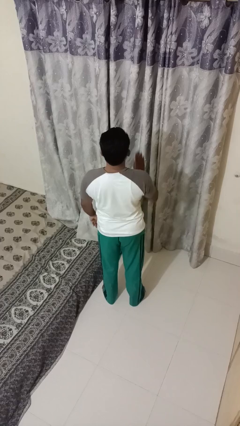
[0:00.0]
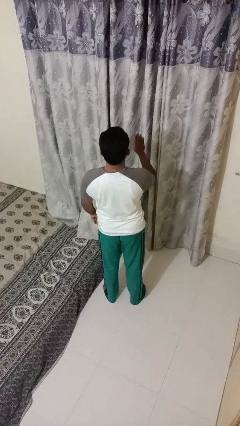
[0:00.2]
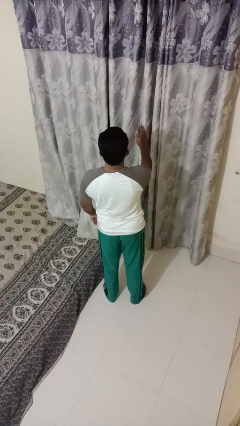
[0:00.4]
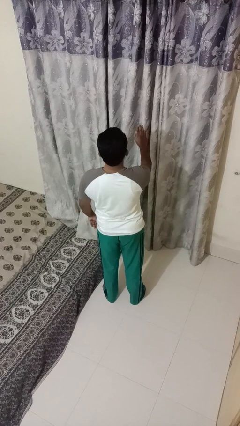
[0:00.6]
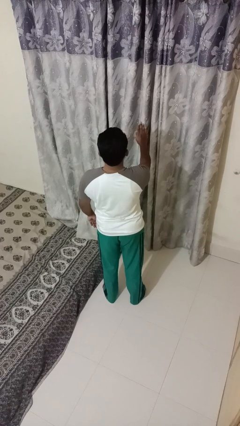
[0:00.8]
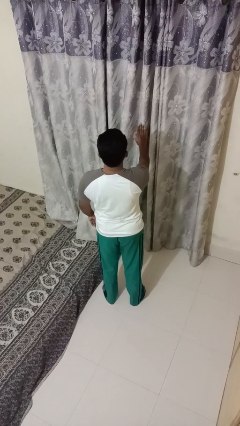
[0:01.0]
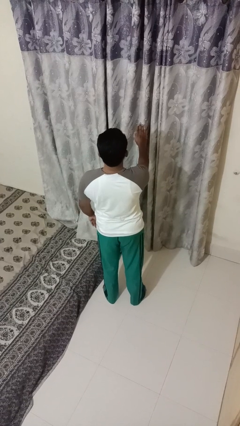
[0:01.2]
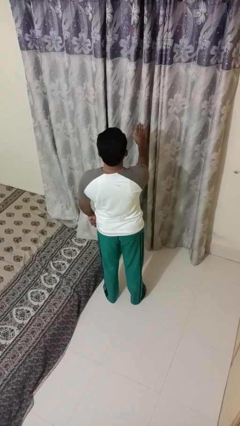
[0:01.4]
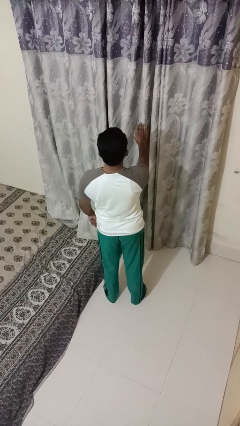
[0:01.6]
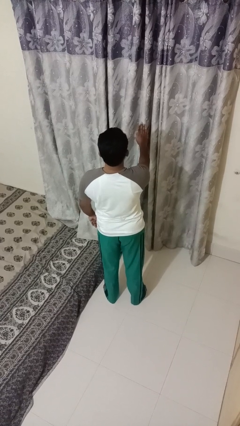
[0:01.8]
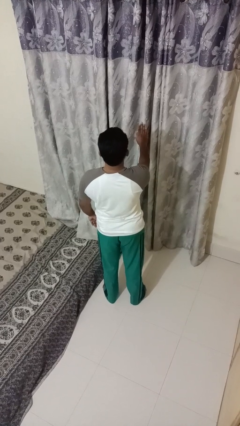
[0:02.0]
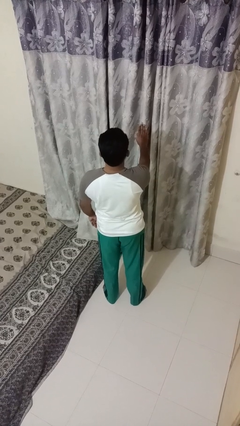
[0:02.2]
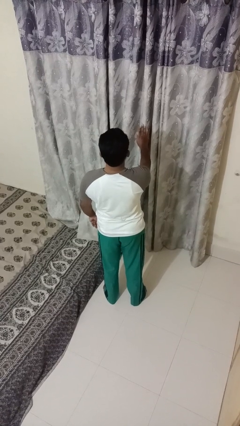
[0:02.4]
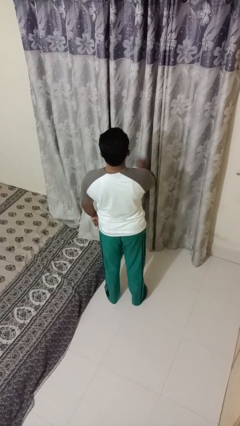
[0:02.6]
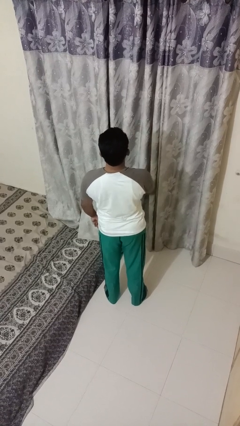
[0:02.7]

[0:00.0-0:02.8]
person gestures stop

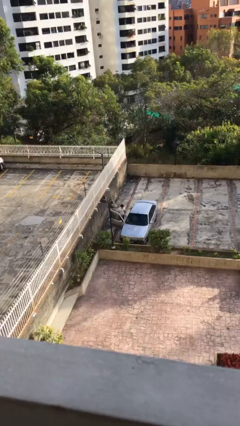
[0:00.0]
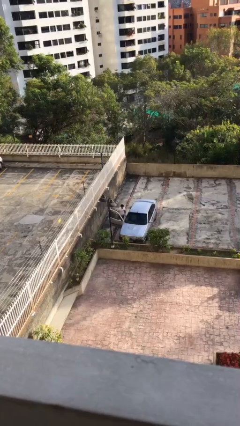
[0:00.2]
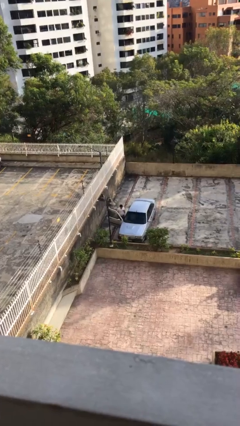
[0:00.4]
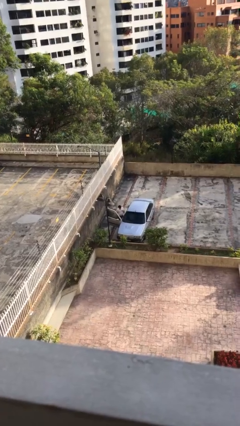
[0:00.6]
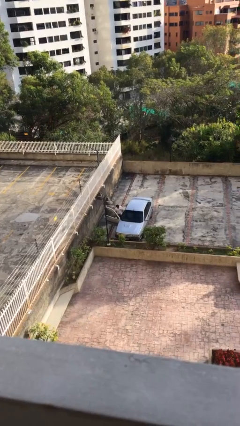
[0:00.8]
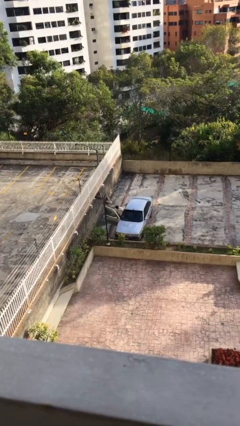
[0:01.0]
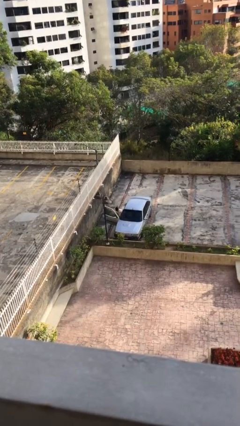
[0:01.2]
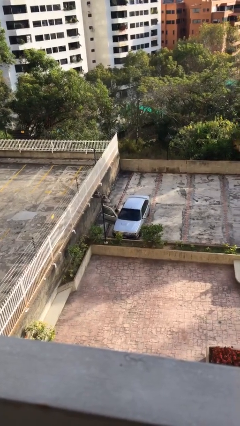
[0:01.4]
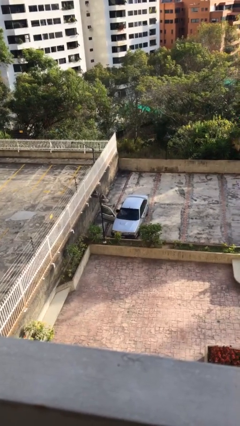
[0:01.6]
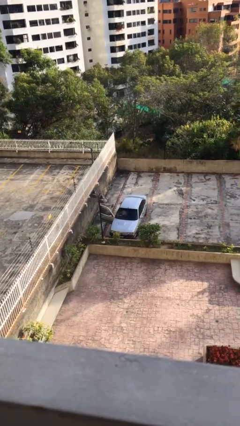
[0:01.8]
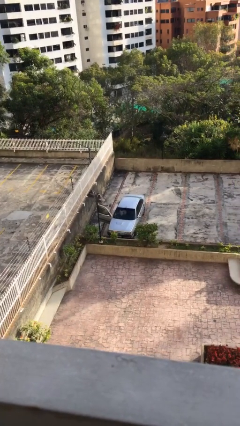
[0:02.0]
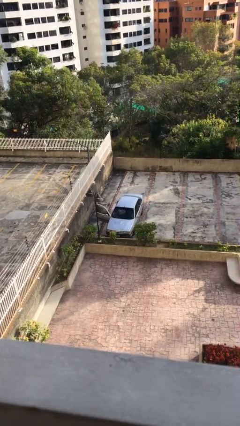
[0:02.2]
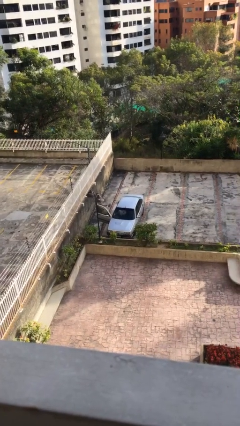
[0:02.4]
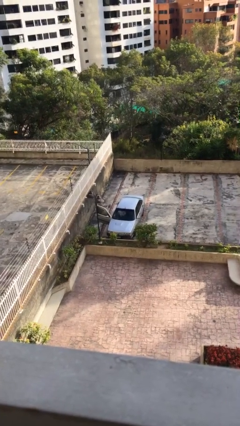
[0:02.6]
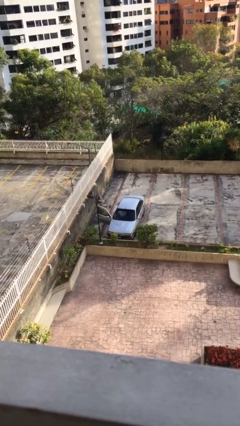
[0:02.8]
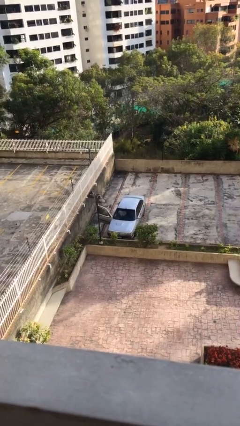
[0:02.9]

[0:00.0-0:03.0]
person enters car

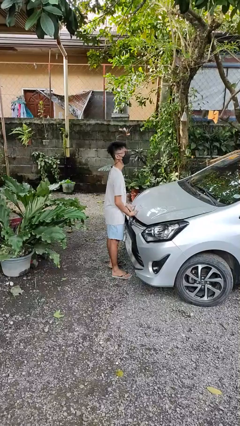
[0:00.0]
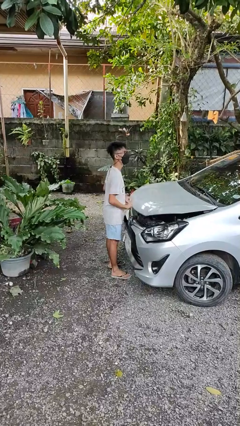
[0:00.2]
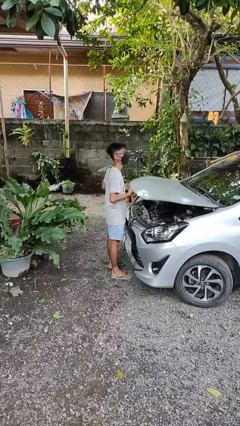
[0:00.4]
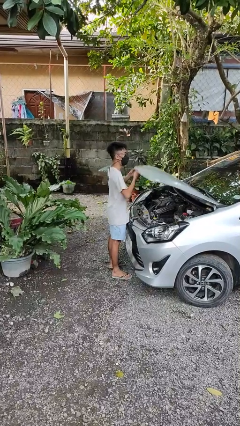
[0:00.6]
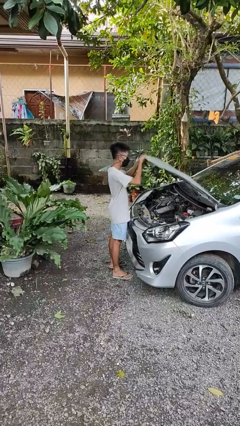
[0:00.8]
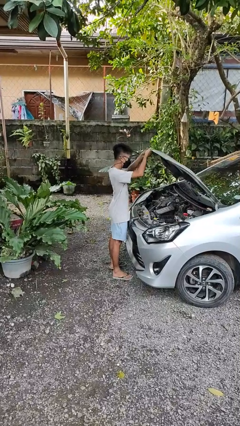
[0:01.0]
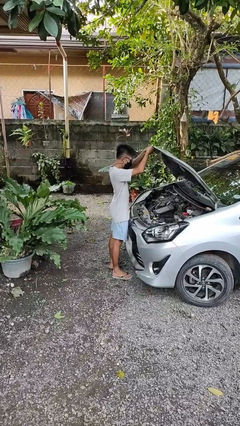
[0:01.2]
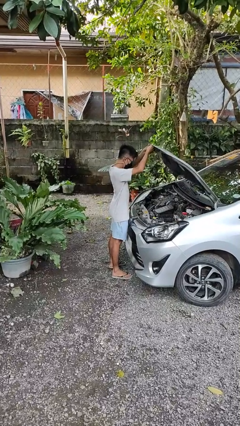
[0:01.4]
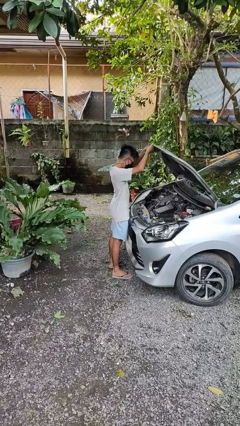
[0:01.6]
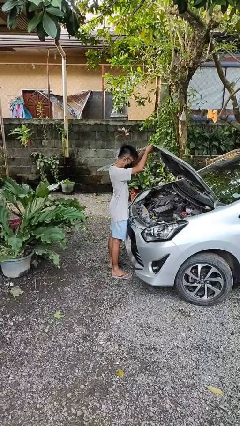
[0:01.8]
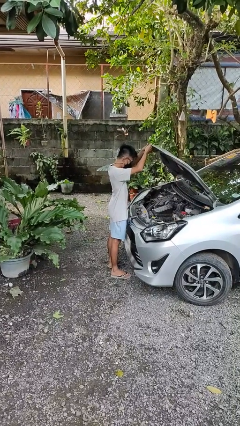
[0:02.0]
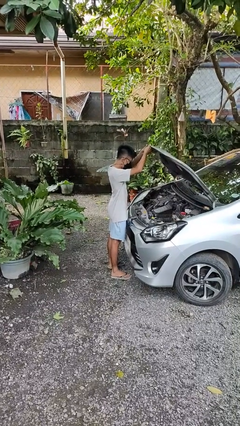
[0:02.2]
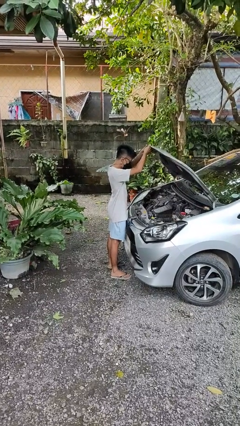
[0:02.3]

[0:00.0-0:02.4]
person opens car hood

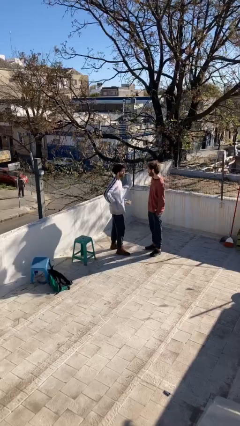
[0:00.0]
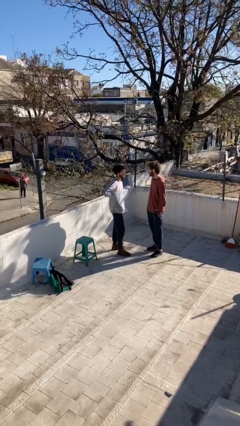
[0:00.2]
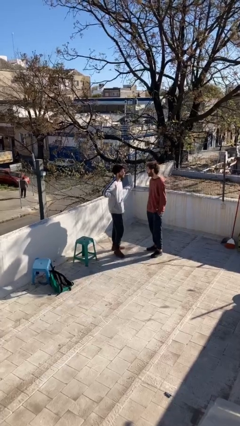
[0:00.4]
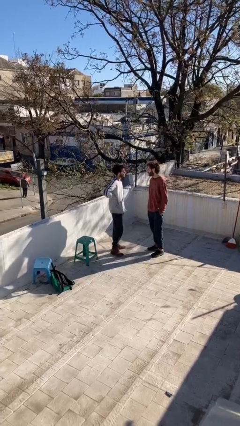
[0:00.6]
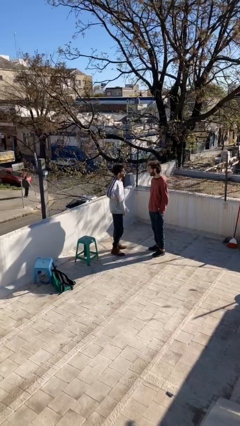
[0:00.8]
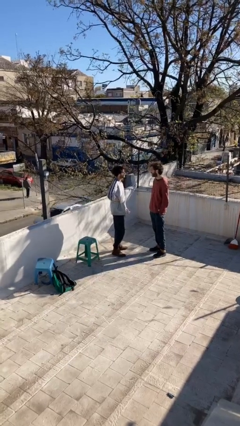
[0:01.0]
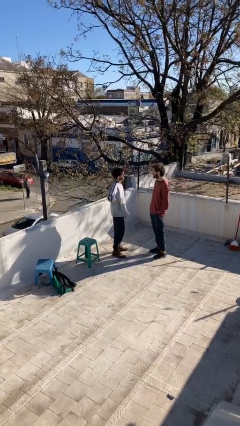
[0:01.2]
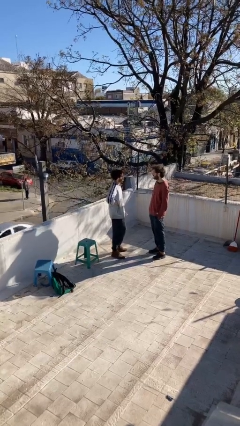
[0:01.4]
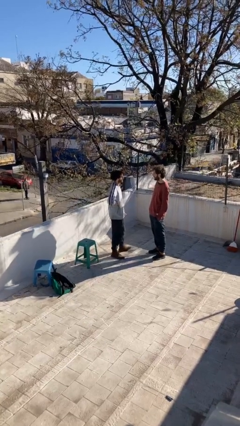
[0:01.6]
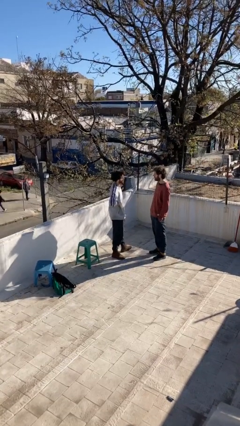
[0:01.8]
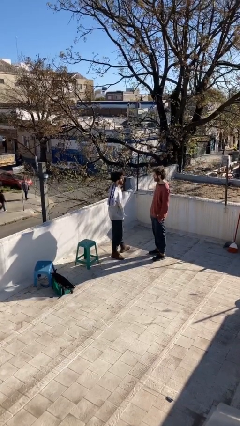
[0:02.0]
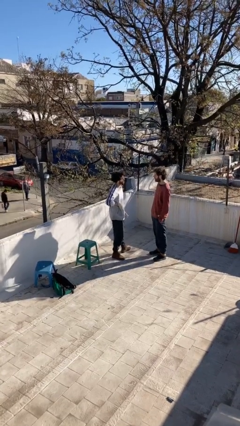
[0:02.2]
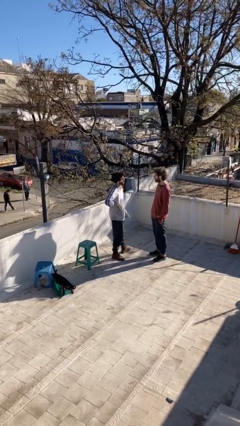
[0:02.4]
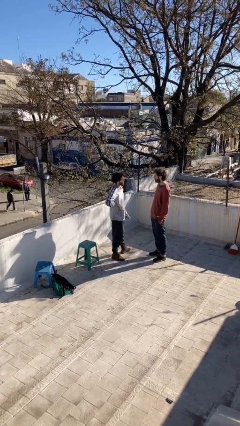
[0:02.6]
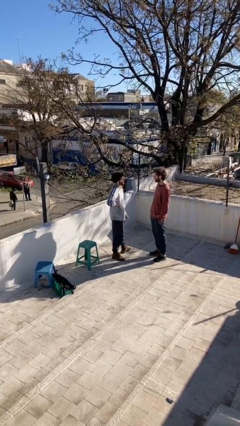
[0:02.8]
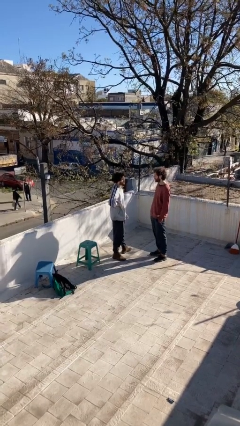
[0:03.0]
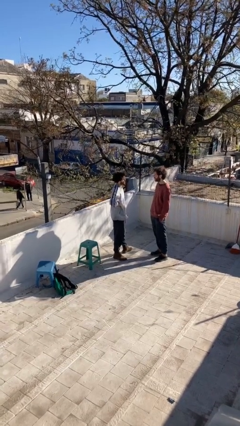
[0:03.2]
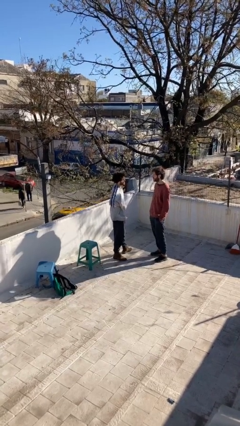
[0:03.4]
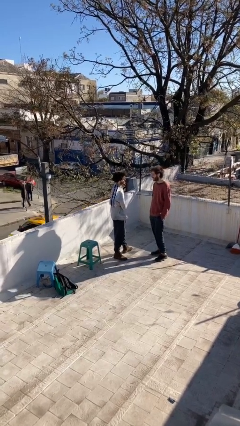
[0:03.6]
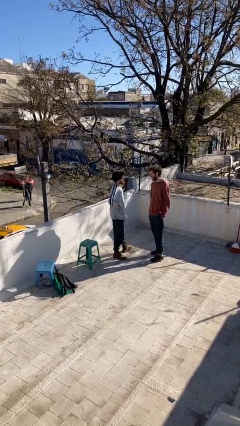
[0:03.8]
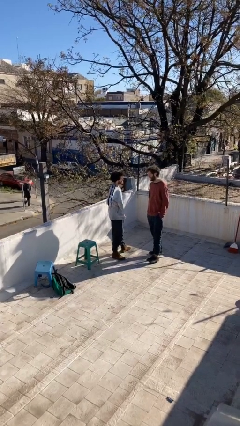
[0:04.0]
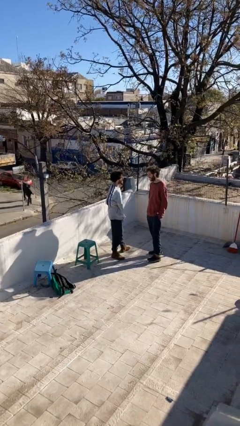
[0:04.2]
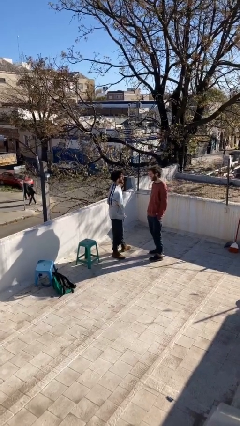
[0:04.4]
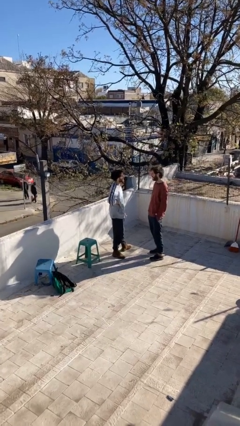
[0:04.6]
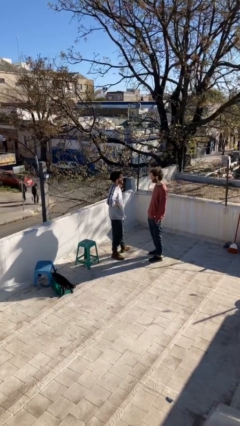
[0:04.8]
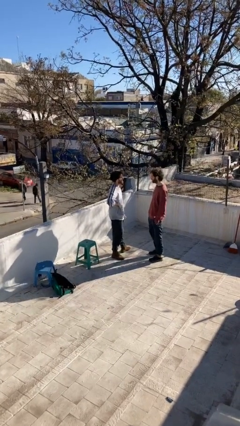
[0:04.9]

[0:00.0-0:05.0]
person talks to person

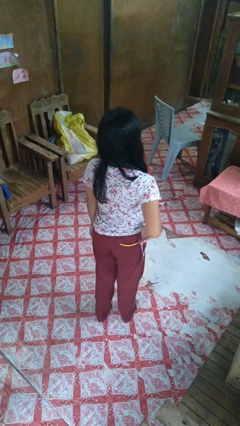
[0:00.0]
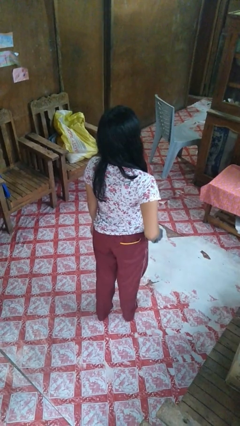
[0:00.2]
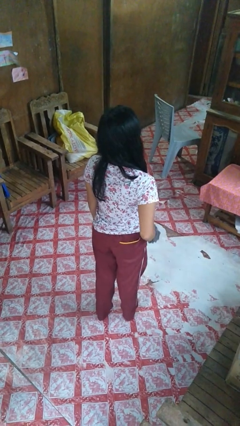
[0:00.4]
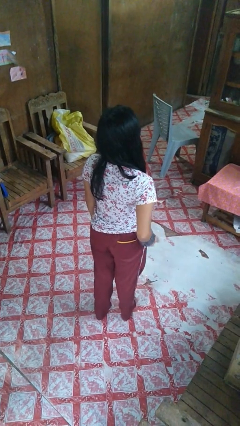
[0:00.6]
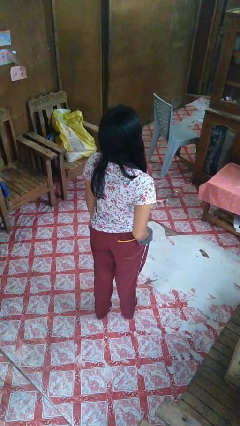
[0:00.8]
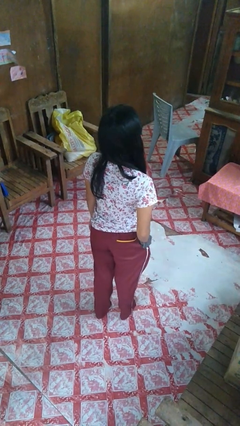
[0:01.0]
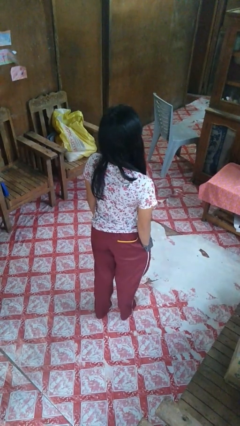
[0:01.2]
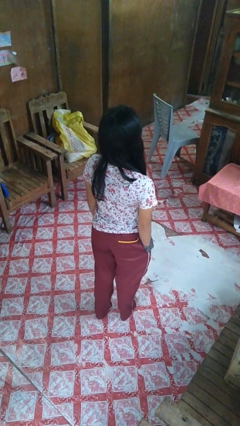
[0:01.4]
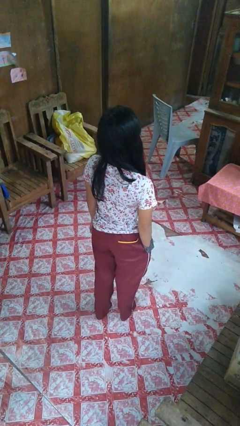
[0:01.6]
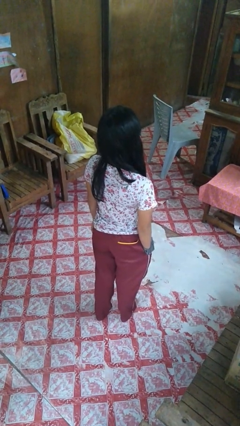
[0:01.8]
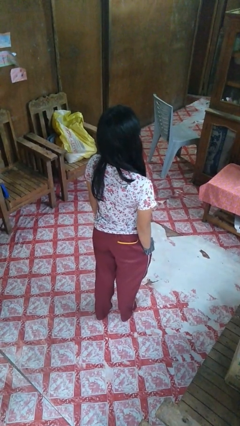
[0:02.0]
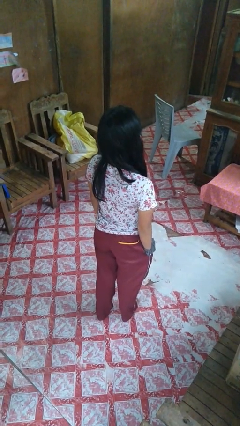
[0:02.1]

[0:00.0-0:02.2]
person puts hands in back pockets

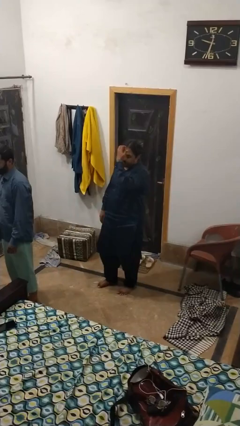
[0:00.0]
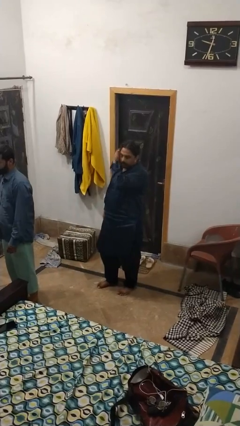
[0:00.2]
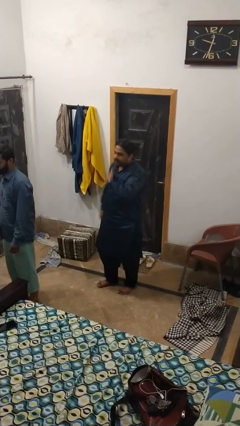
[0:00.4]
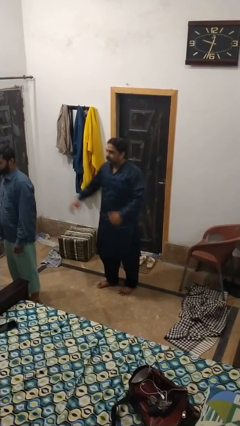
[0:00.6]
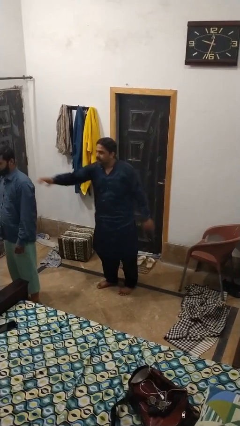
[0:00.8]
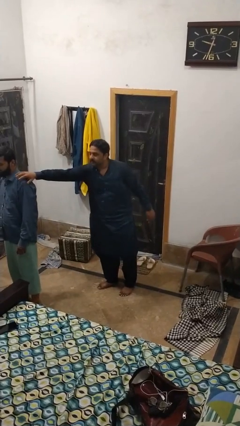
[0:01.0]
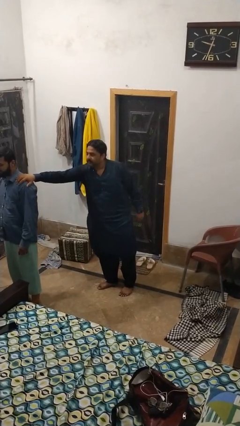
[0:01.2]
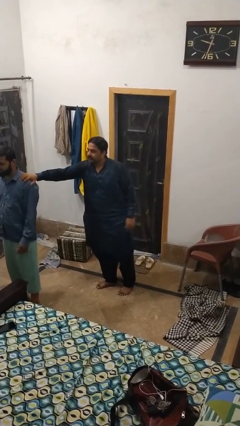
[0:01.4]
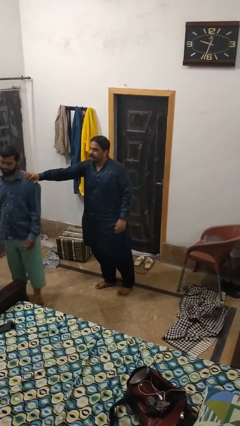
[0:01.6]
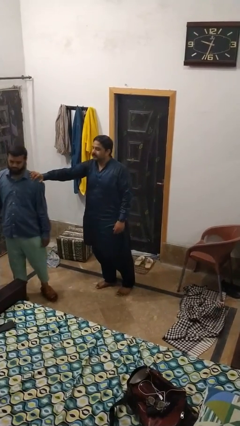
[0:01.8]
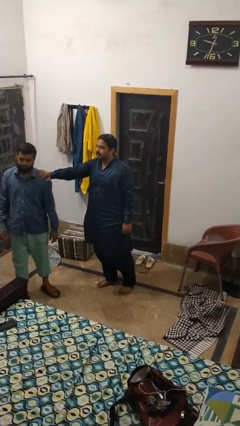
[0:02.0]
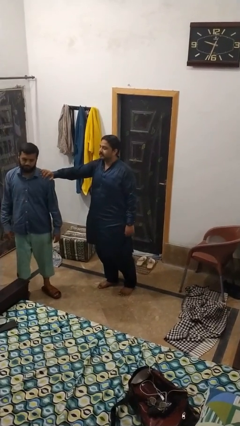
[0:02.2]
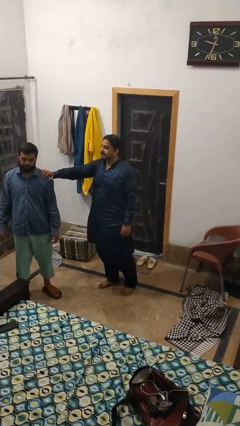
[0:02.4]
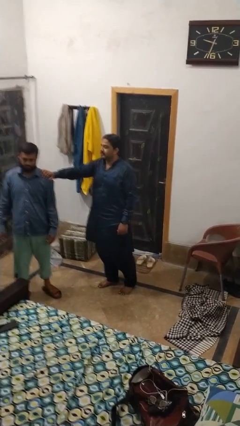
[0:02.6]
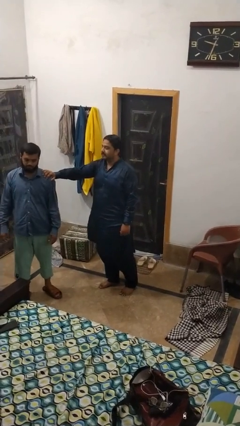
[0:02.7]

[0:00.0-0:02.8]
person grabs person by shoulder
